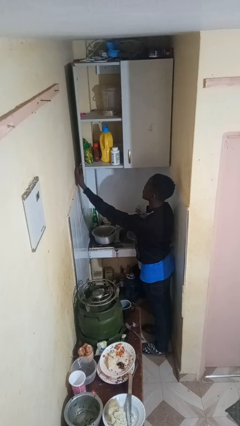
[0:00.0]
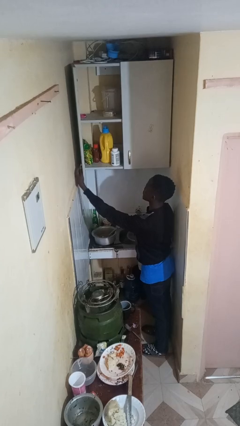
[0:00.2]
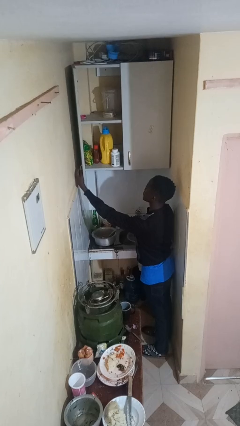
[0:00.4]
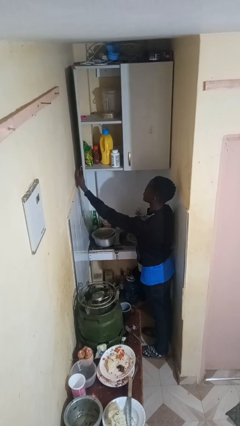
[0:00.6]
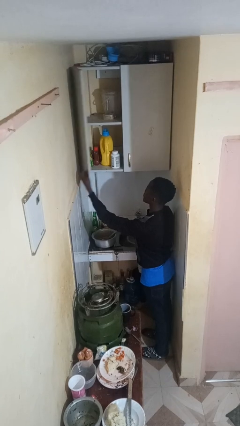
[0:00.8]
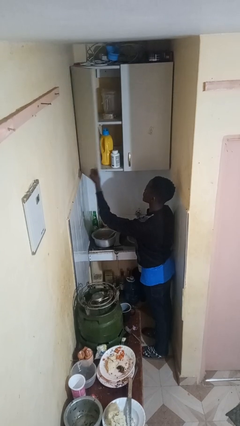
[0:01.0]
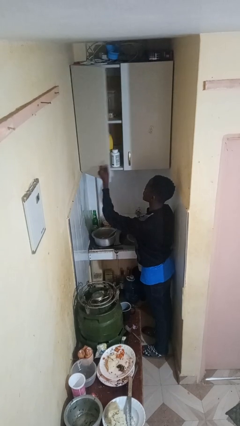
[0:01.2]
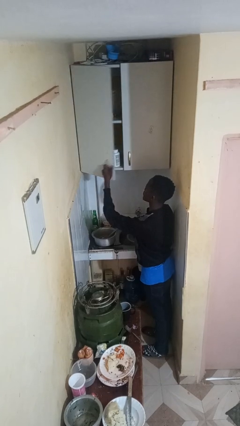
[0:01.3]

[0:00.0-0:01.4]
person closes kitchen drawer

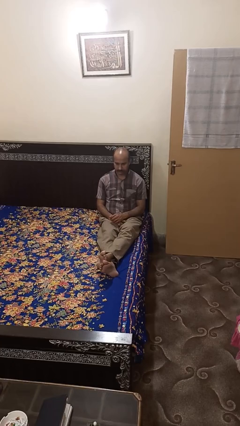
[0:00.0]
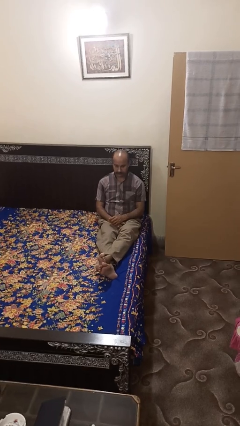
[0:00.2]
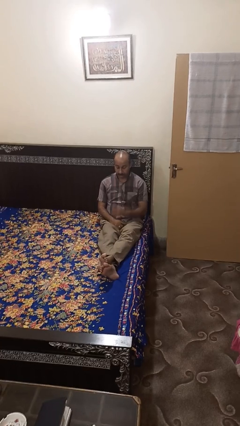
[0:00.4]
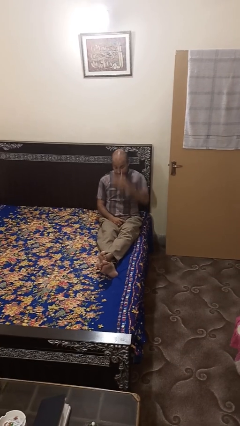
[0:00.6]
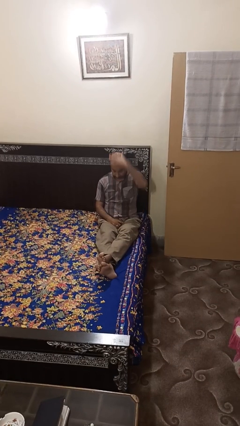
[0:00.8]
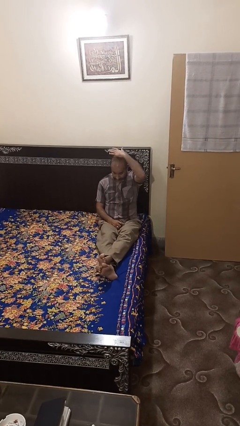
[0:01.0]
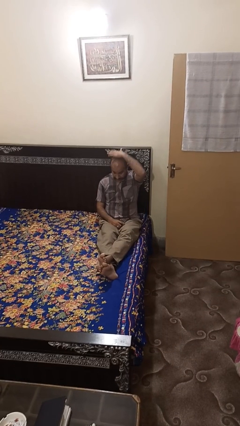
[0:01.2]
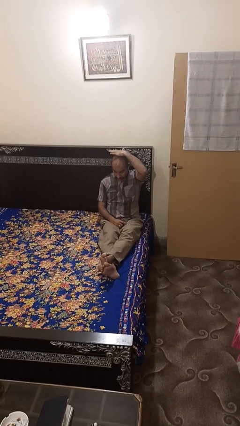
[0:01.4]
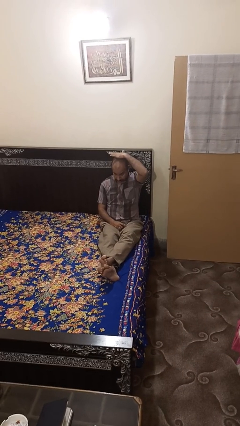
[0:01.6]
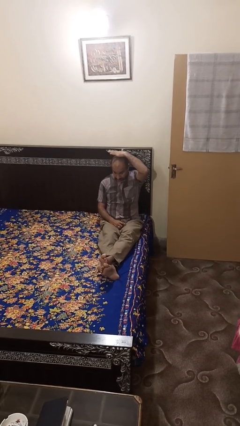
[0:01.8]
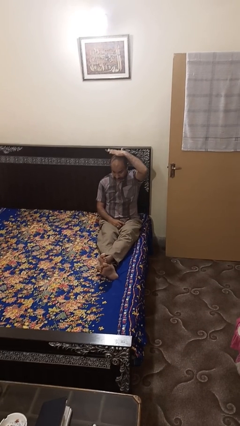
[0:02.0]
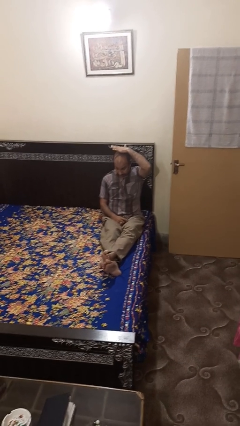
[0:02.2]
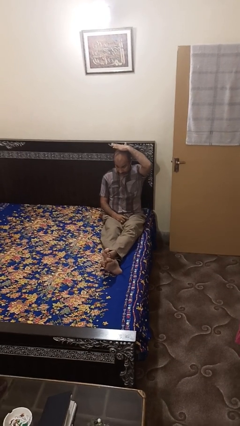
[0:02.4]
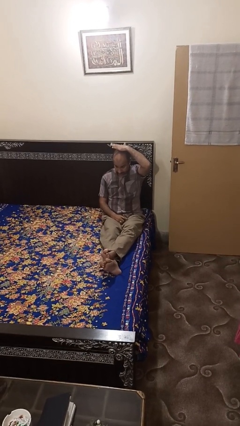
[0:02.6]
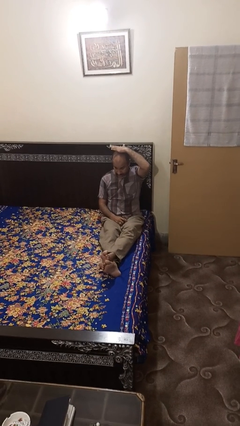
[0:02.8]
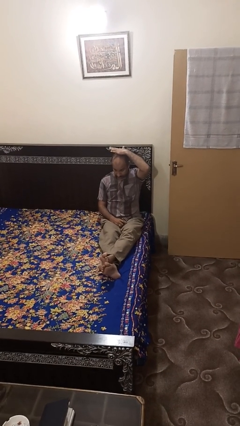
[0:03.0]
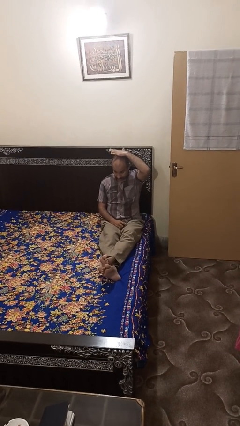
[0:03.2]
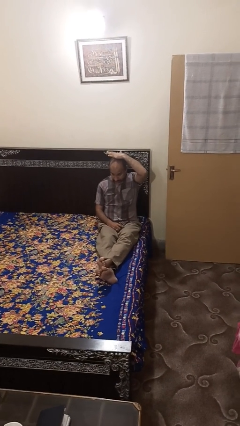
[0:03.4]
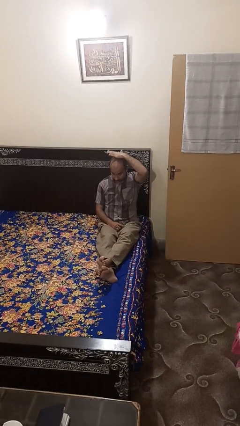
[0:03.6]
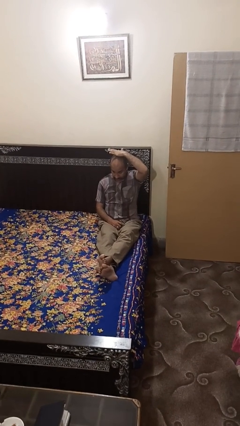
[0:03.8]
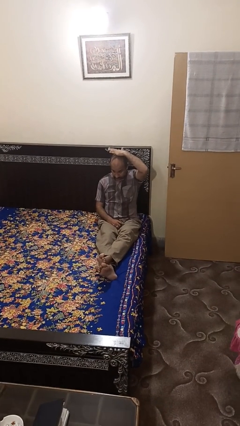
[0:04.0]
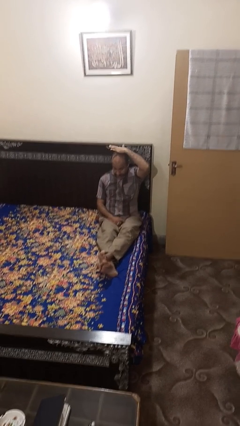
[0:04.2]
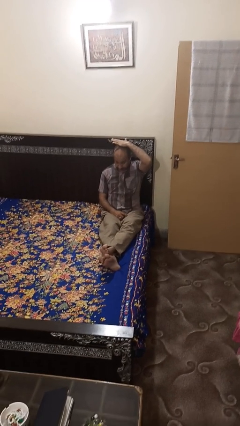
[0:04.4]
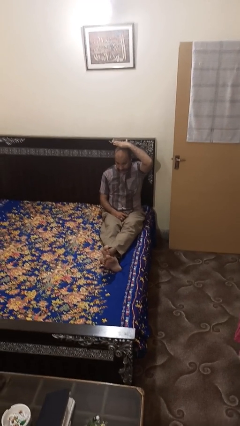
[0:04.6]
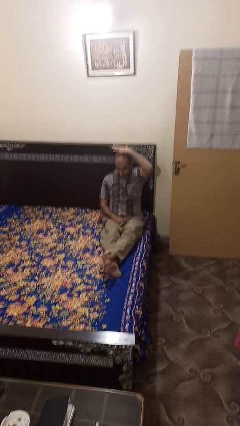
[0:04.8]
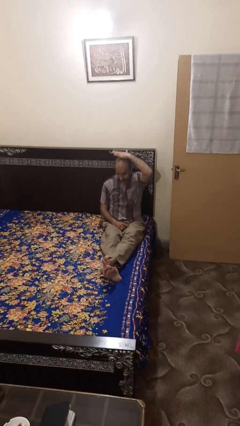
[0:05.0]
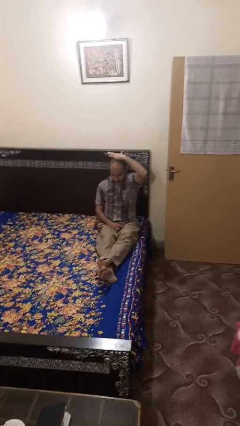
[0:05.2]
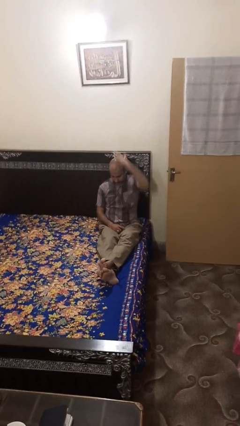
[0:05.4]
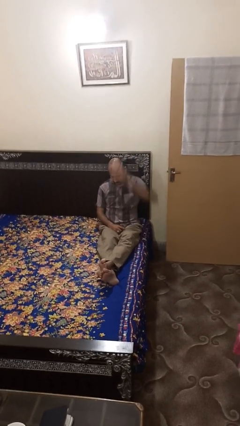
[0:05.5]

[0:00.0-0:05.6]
person pats head

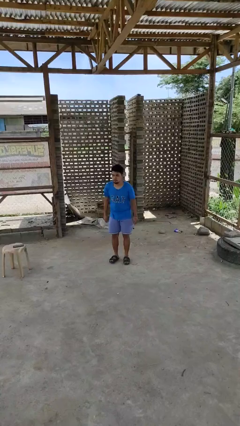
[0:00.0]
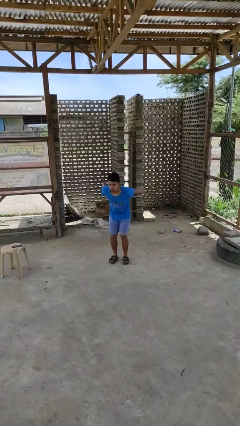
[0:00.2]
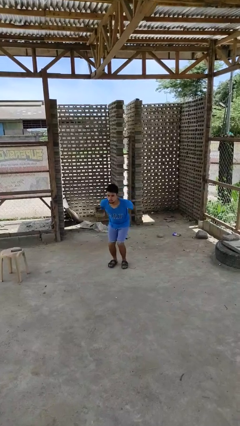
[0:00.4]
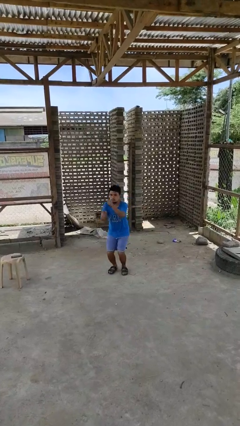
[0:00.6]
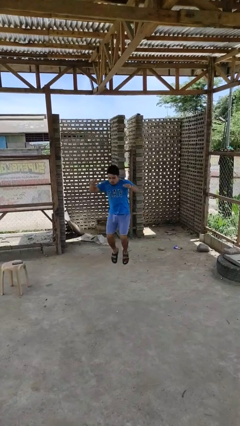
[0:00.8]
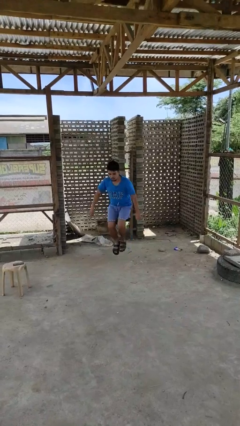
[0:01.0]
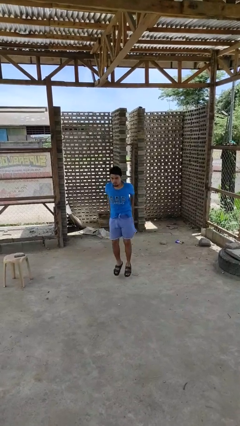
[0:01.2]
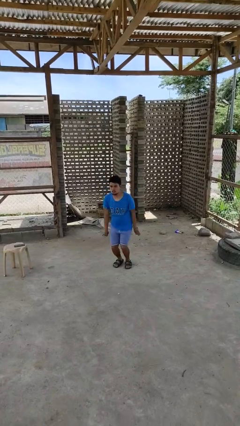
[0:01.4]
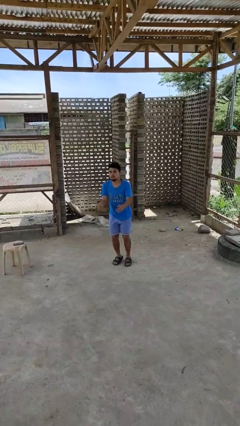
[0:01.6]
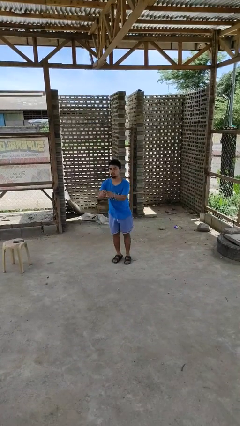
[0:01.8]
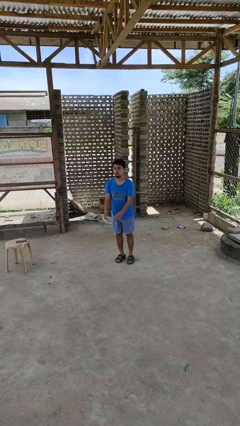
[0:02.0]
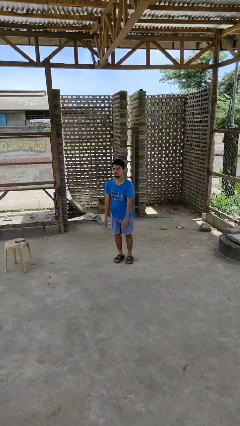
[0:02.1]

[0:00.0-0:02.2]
person jumps

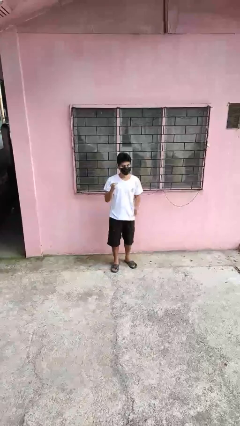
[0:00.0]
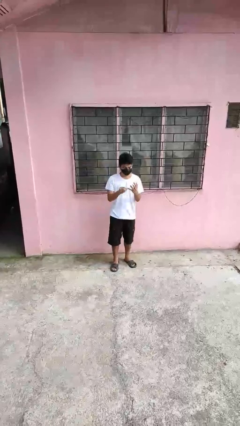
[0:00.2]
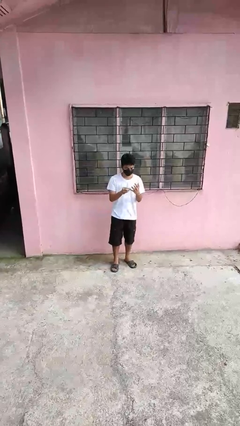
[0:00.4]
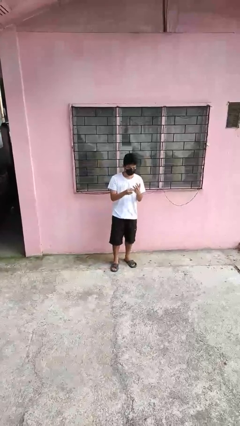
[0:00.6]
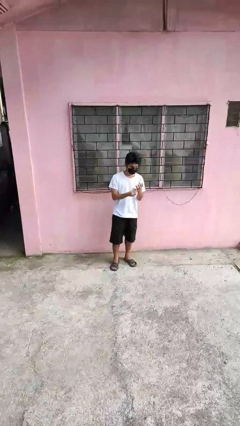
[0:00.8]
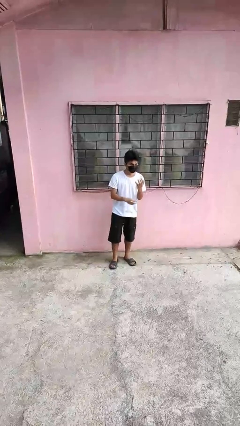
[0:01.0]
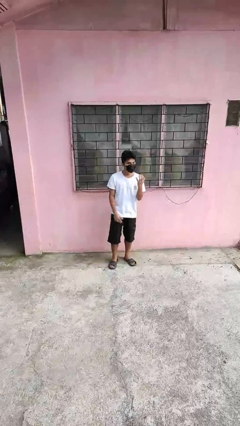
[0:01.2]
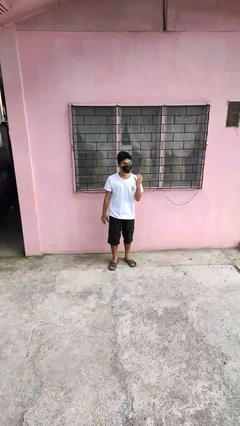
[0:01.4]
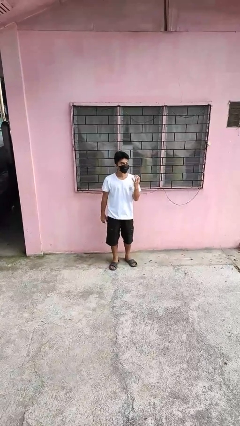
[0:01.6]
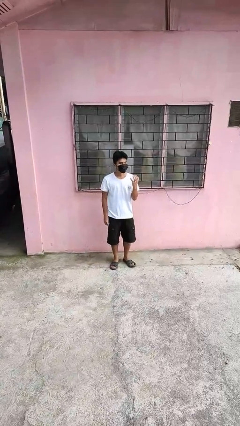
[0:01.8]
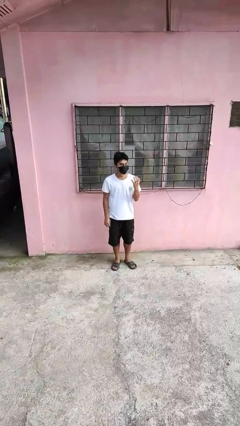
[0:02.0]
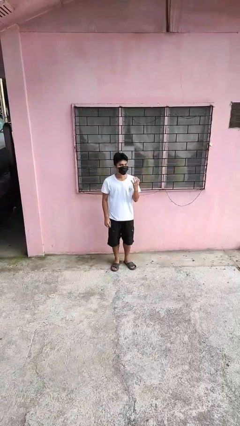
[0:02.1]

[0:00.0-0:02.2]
person puts on ring

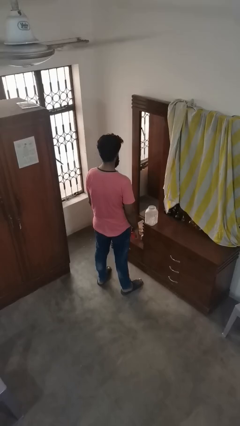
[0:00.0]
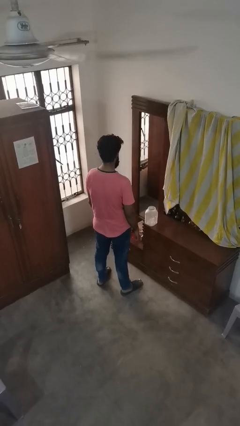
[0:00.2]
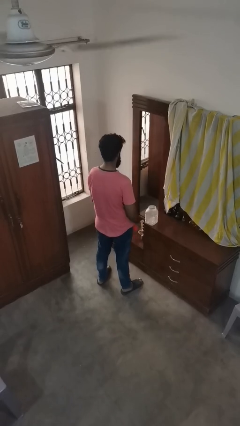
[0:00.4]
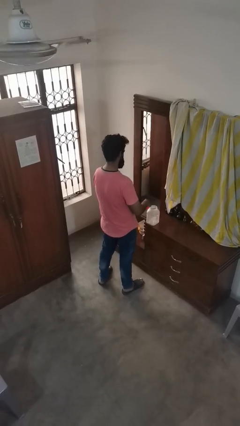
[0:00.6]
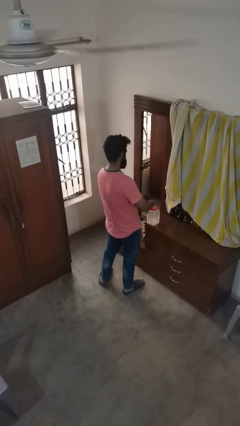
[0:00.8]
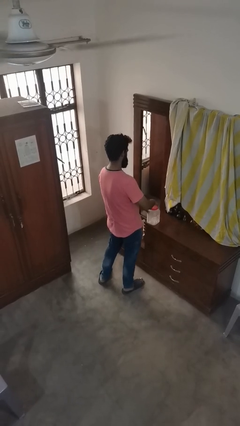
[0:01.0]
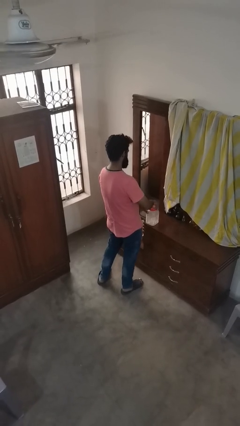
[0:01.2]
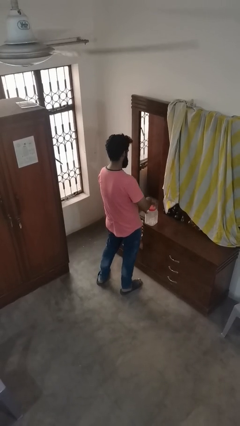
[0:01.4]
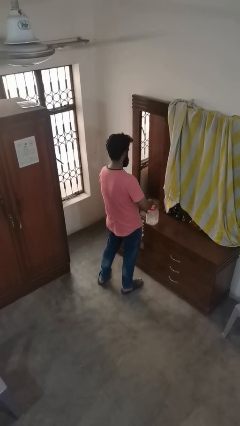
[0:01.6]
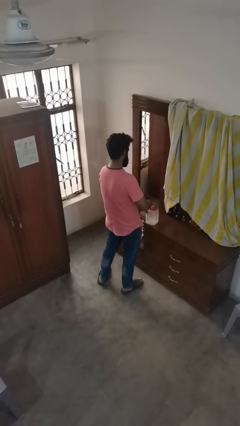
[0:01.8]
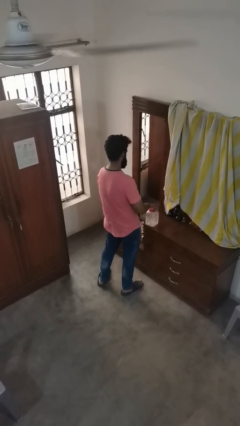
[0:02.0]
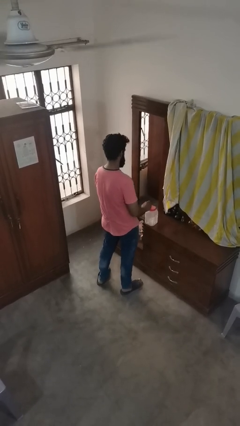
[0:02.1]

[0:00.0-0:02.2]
person closes jar

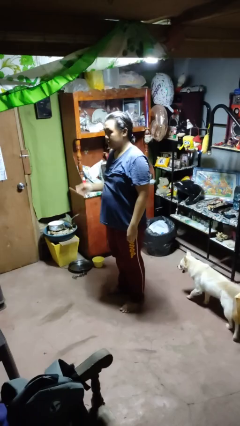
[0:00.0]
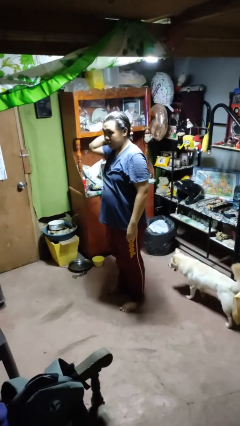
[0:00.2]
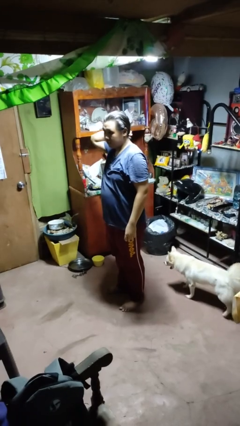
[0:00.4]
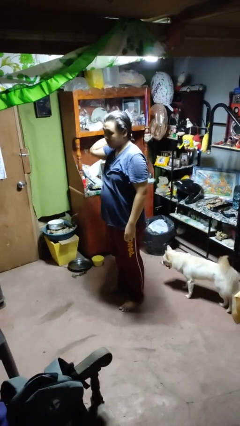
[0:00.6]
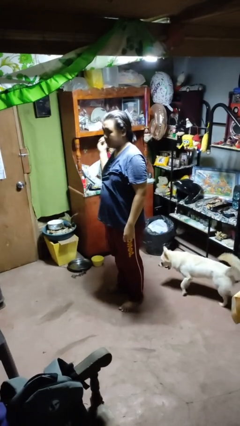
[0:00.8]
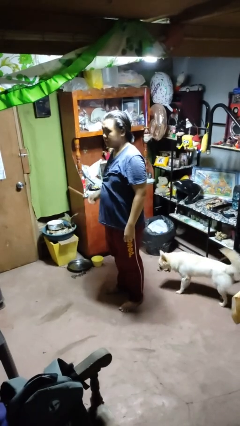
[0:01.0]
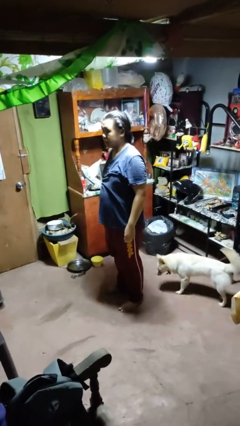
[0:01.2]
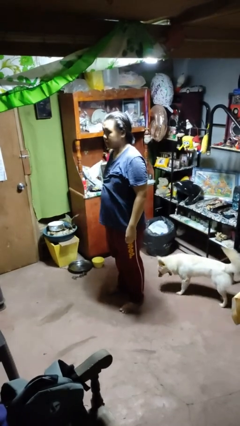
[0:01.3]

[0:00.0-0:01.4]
person takes off hairtie

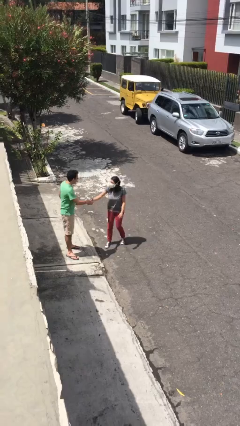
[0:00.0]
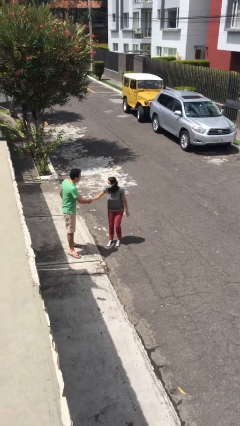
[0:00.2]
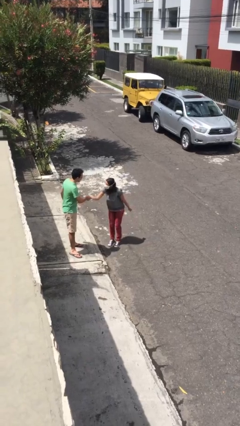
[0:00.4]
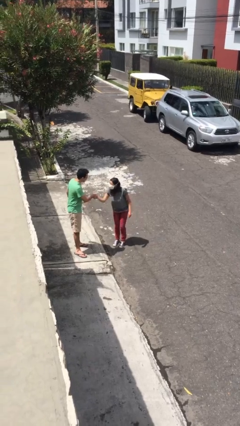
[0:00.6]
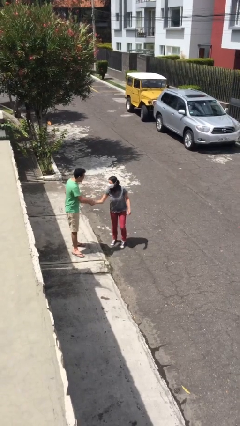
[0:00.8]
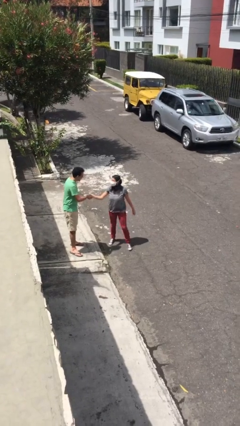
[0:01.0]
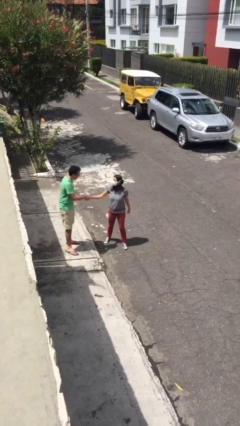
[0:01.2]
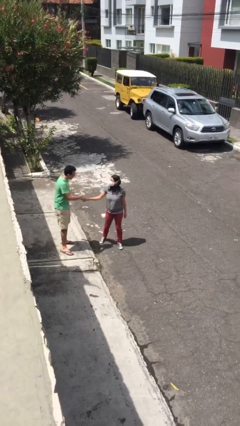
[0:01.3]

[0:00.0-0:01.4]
person shakes hand

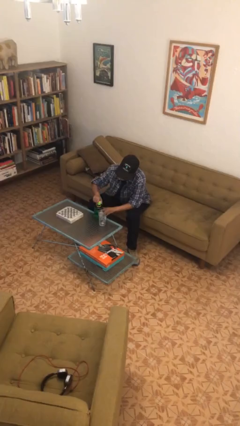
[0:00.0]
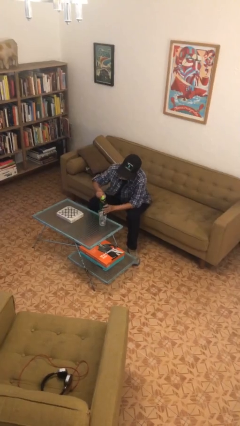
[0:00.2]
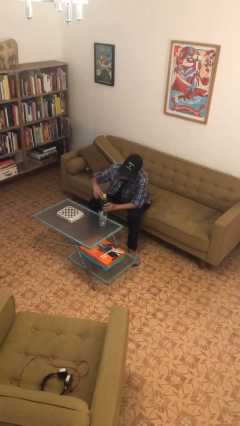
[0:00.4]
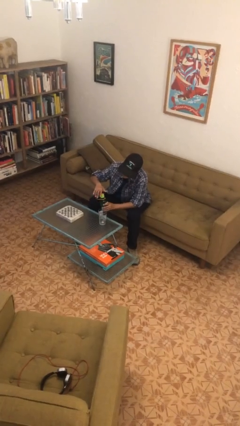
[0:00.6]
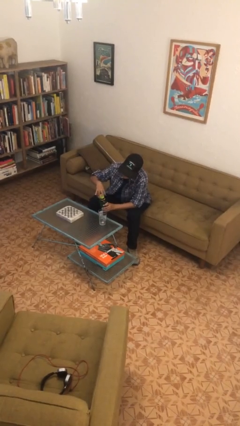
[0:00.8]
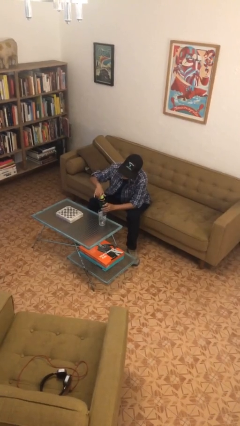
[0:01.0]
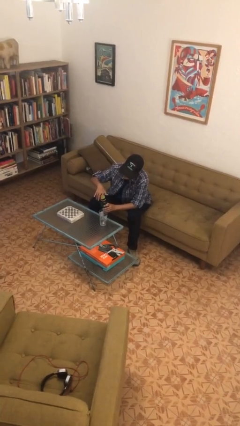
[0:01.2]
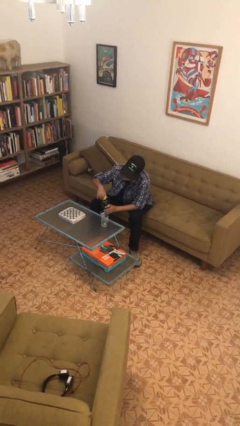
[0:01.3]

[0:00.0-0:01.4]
person unscrews lid from bottle
